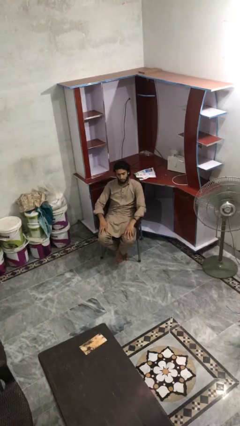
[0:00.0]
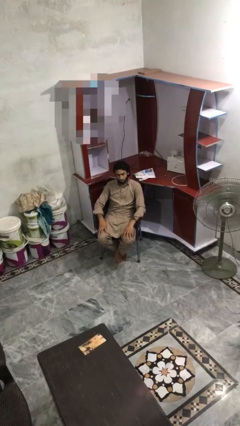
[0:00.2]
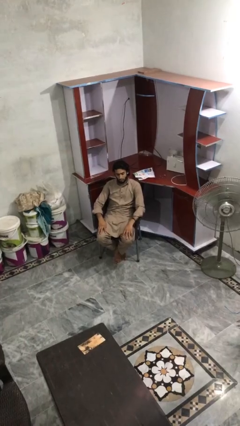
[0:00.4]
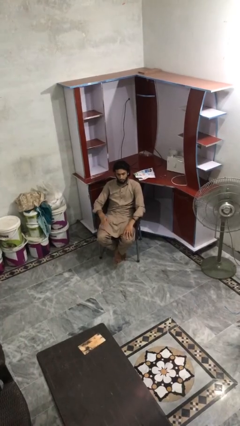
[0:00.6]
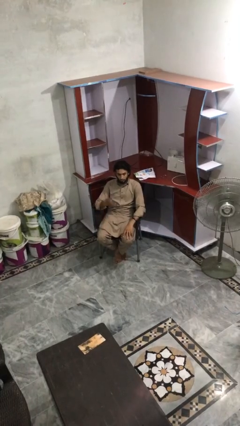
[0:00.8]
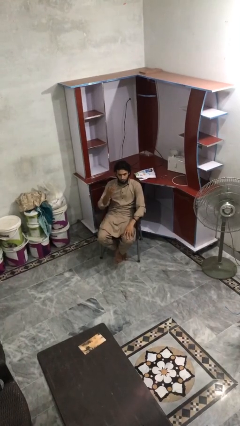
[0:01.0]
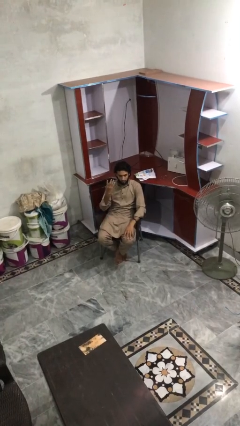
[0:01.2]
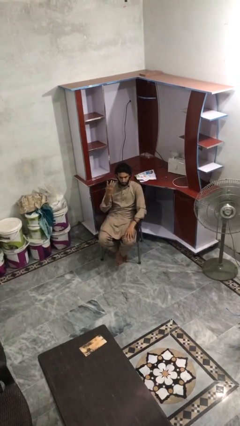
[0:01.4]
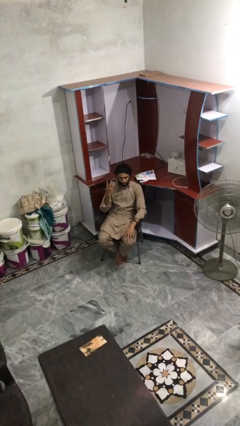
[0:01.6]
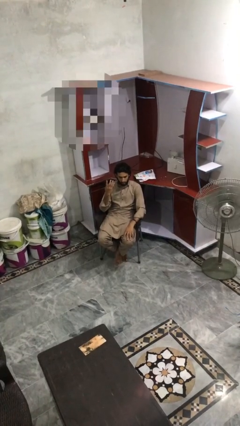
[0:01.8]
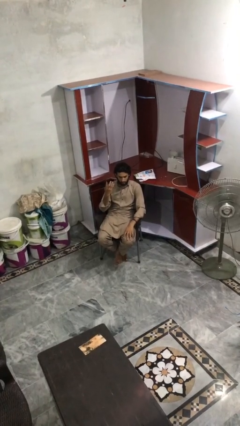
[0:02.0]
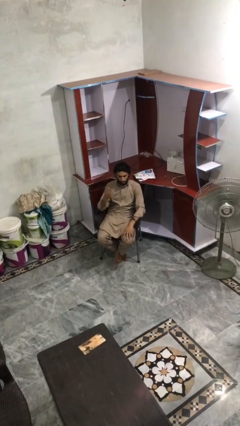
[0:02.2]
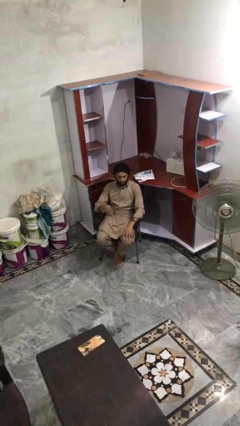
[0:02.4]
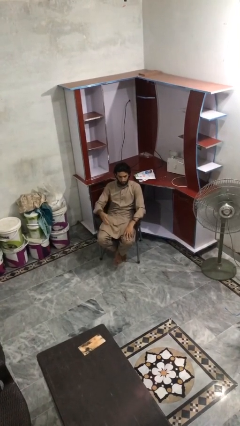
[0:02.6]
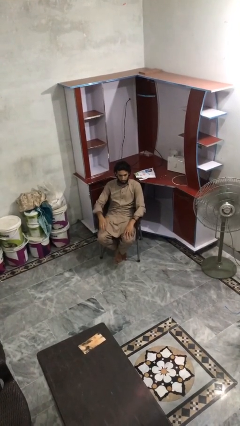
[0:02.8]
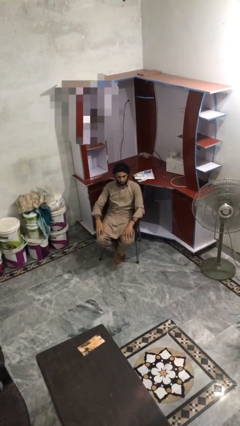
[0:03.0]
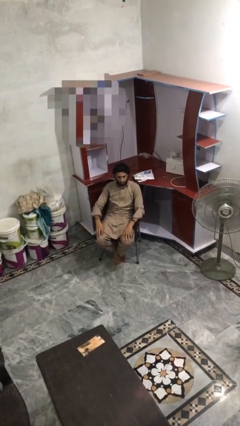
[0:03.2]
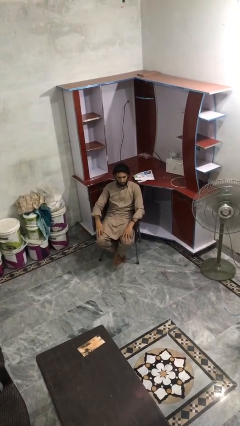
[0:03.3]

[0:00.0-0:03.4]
person gestures number four

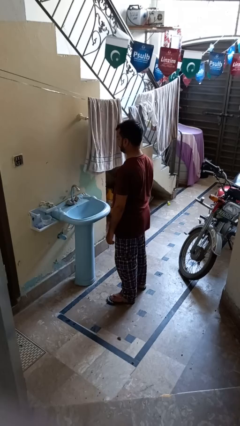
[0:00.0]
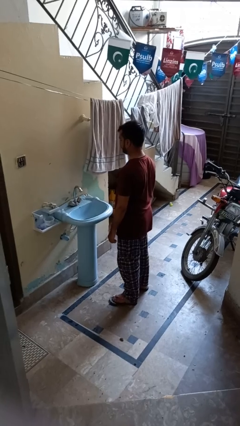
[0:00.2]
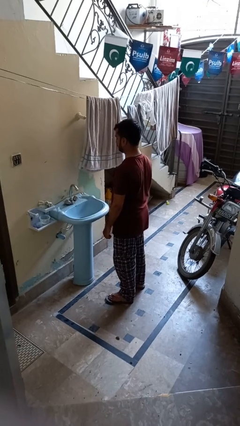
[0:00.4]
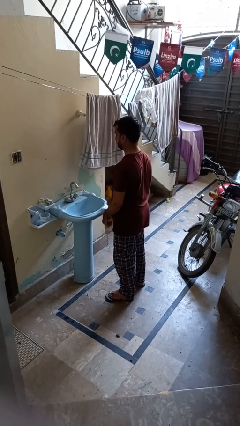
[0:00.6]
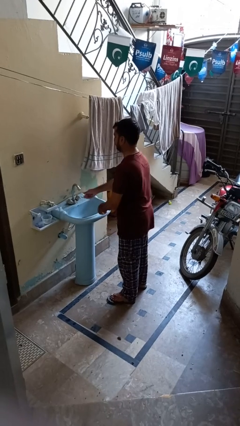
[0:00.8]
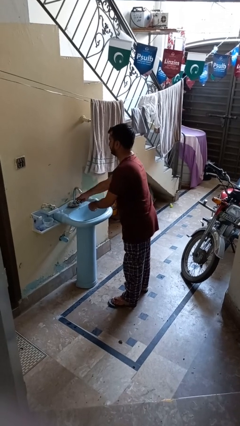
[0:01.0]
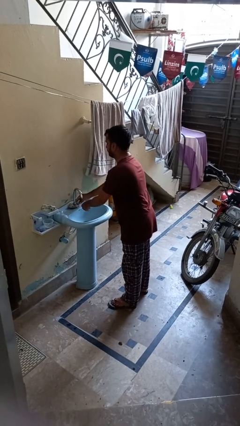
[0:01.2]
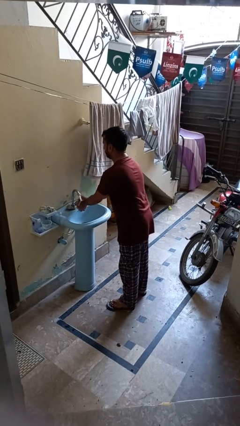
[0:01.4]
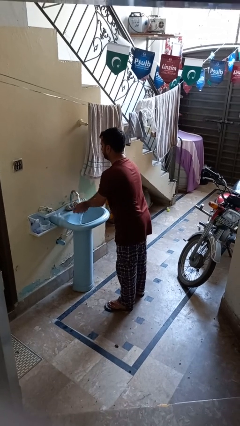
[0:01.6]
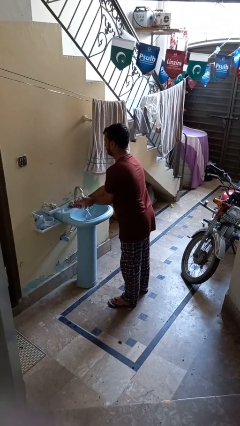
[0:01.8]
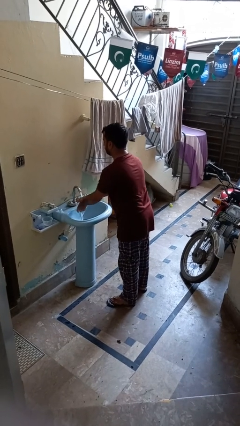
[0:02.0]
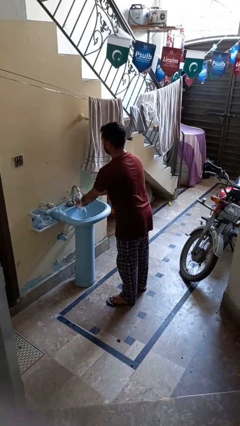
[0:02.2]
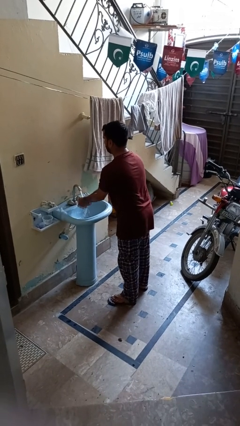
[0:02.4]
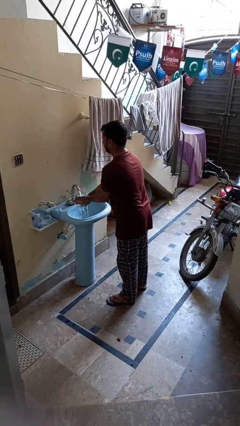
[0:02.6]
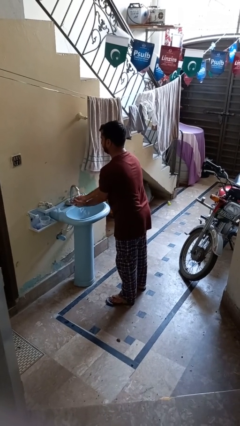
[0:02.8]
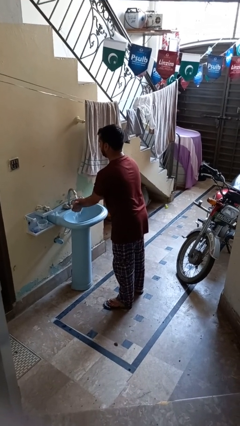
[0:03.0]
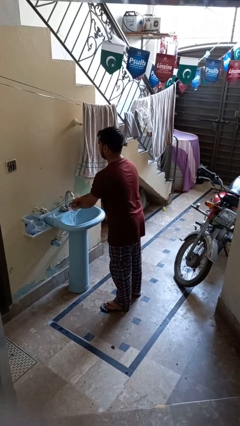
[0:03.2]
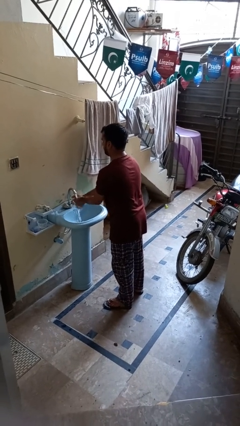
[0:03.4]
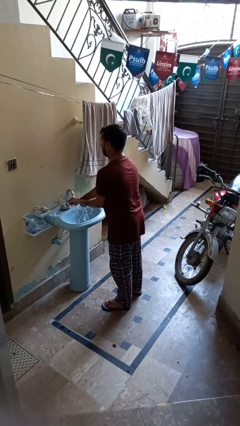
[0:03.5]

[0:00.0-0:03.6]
person washes hands

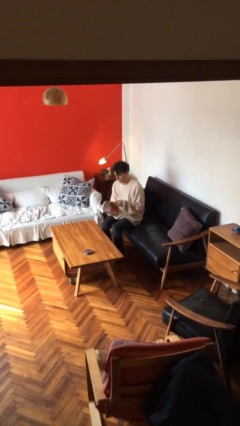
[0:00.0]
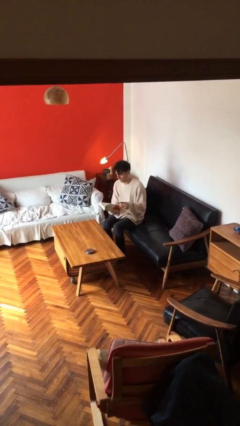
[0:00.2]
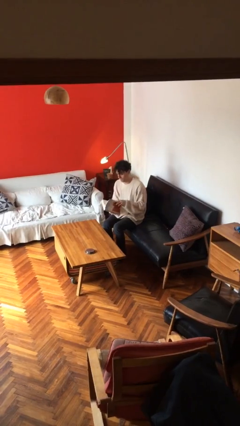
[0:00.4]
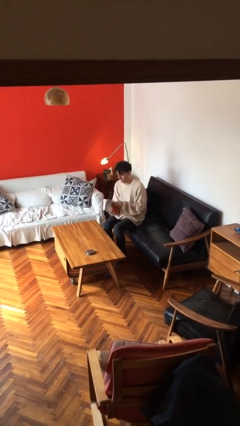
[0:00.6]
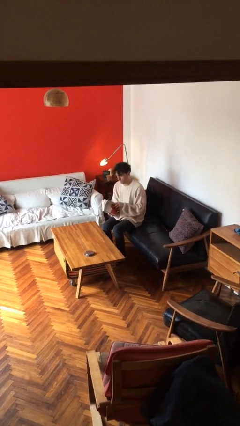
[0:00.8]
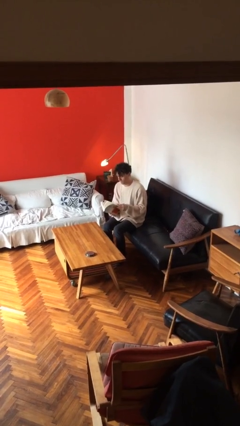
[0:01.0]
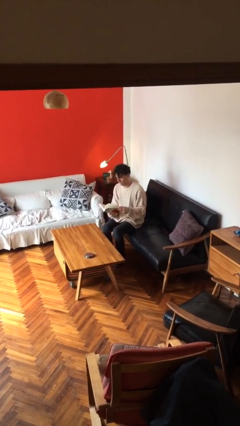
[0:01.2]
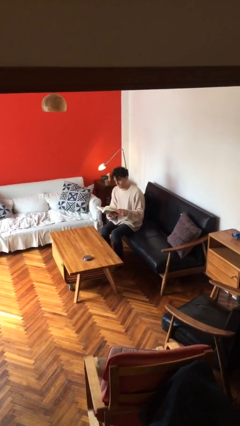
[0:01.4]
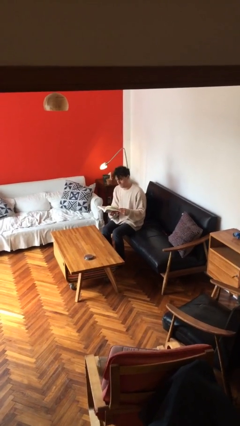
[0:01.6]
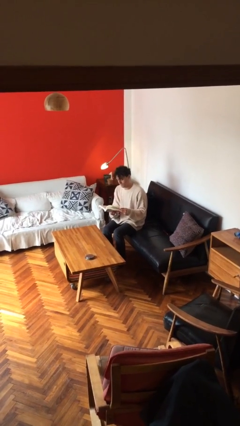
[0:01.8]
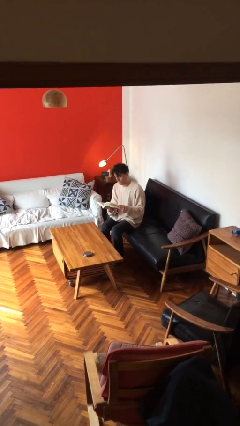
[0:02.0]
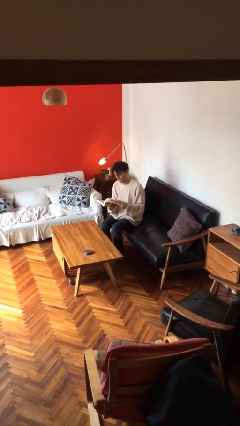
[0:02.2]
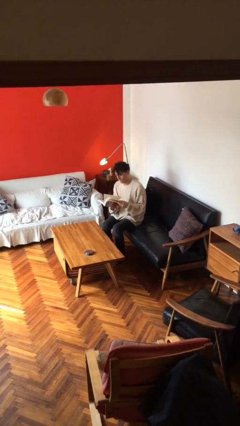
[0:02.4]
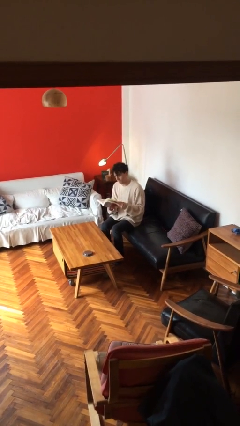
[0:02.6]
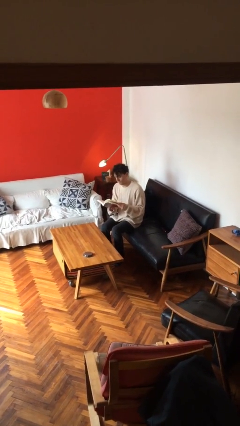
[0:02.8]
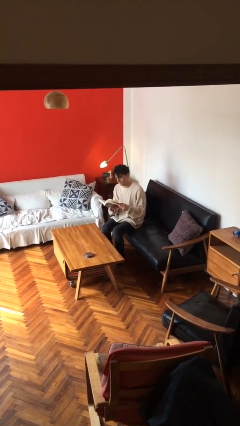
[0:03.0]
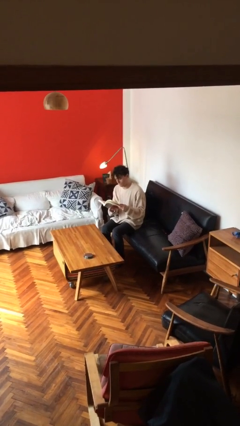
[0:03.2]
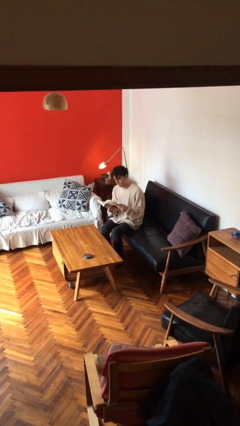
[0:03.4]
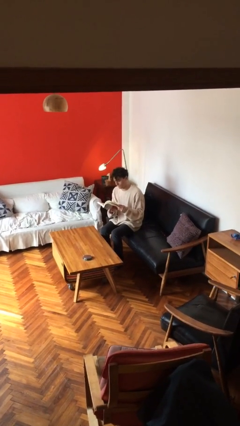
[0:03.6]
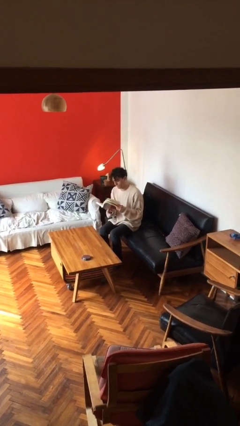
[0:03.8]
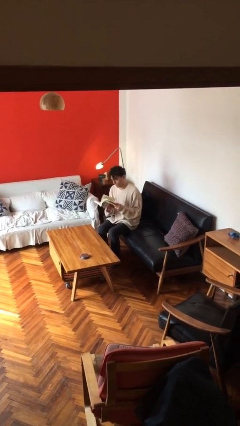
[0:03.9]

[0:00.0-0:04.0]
person reads document

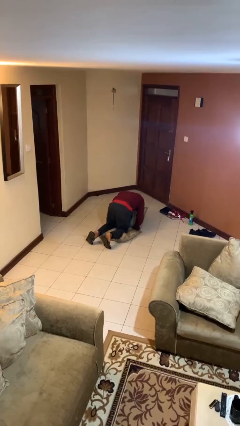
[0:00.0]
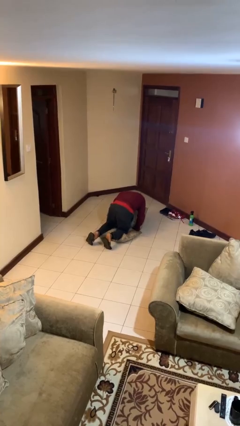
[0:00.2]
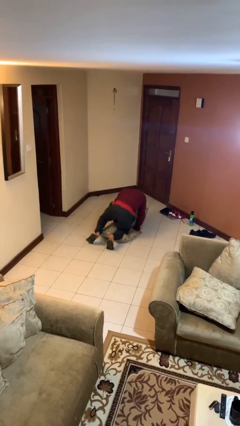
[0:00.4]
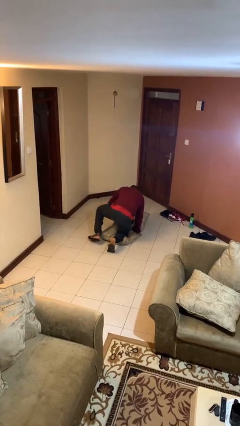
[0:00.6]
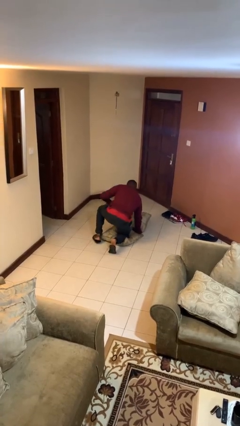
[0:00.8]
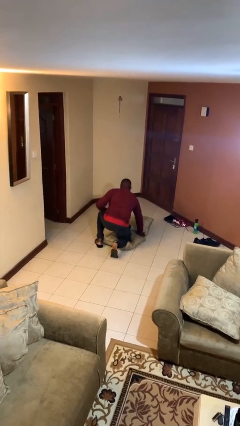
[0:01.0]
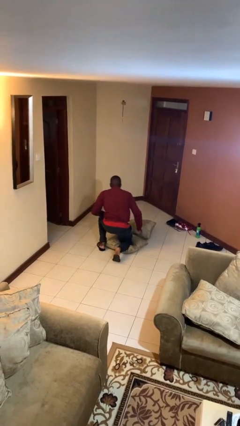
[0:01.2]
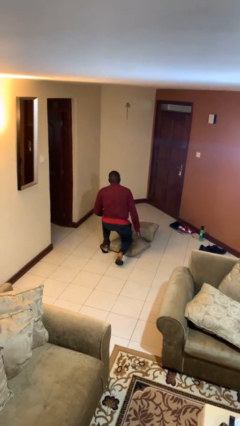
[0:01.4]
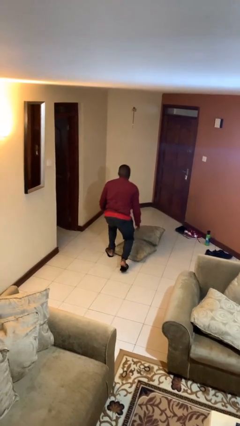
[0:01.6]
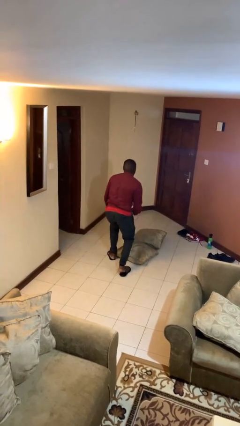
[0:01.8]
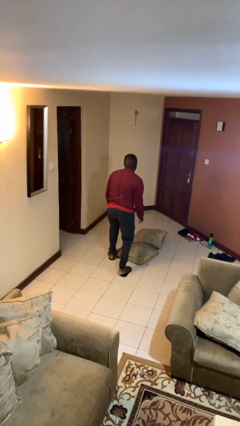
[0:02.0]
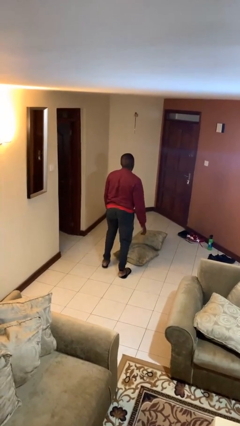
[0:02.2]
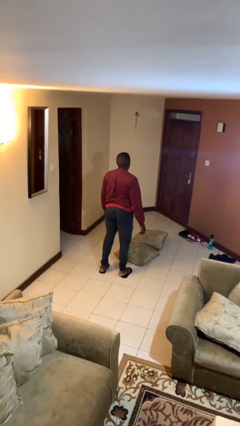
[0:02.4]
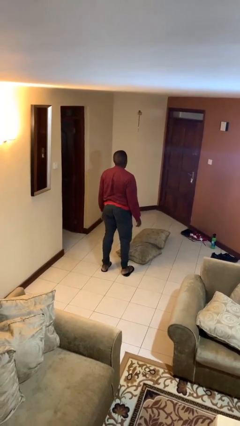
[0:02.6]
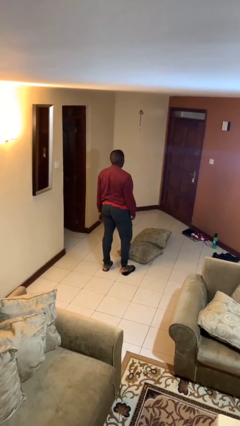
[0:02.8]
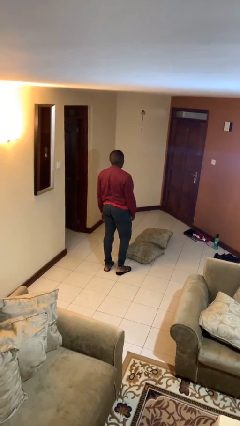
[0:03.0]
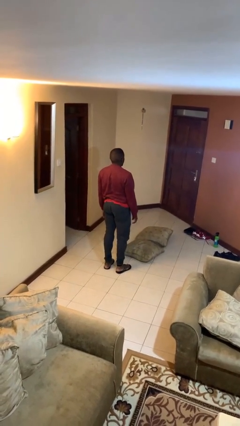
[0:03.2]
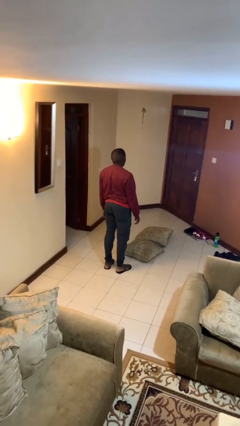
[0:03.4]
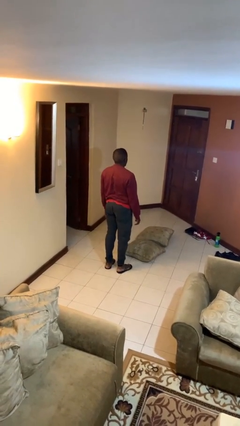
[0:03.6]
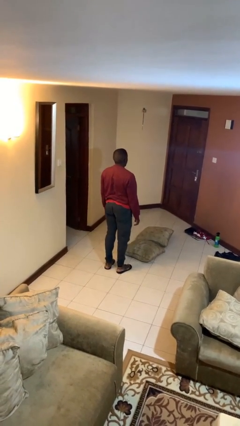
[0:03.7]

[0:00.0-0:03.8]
person stands up from floor

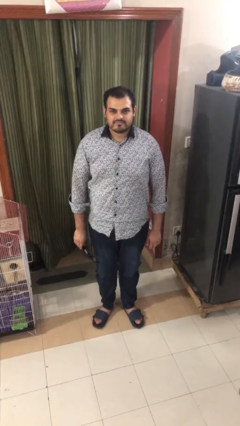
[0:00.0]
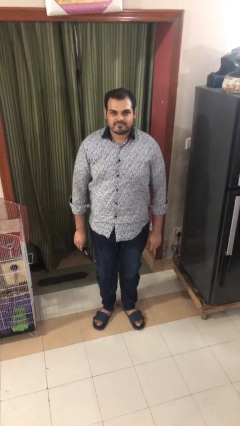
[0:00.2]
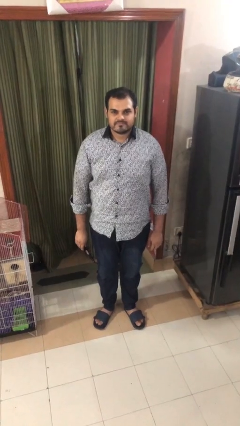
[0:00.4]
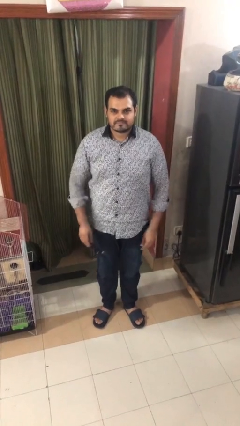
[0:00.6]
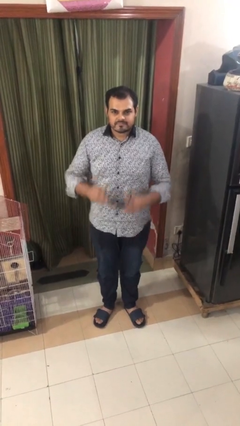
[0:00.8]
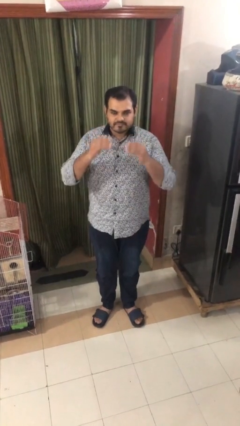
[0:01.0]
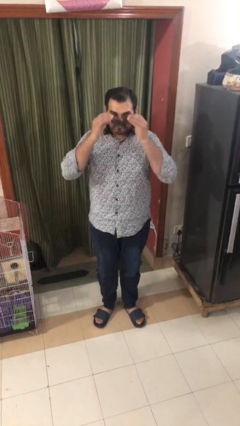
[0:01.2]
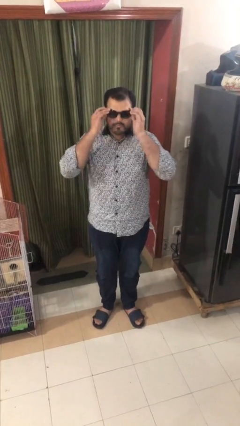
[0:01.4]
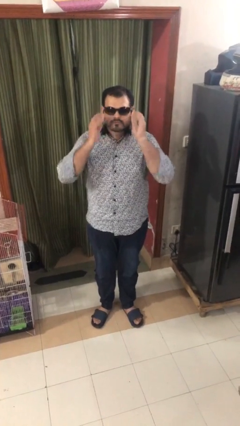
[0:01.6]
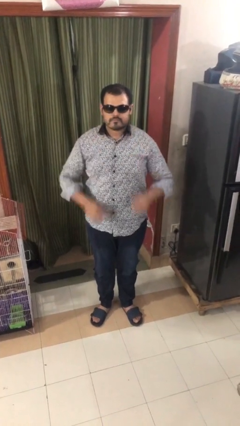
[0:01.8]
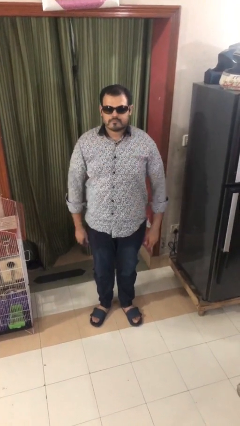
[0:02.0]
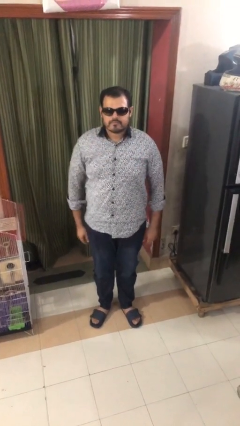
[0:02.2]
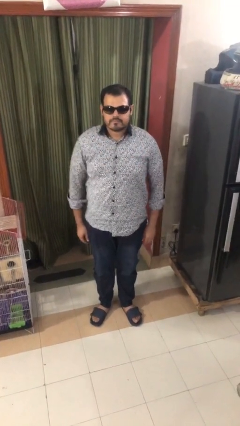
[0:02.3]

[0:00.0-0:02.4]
person puts on sunglasses

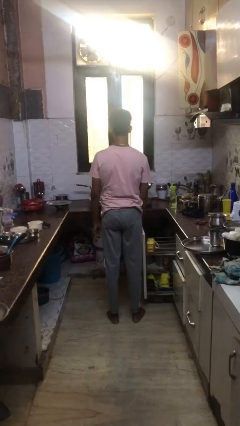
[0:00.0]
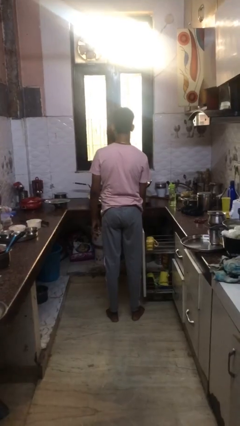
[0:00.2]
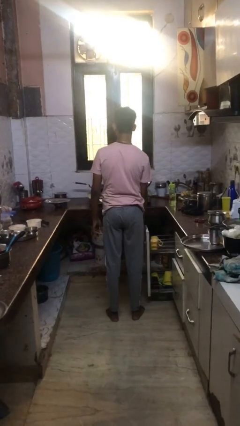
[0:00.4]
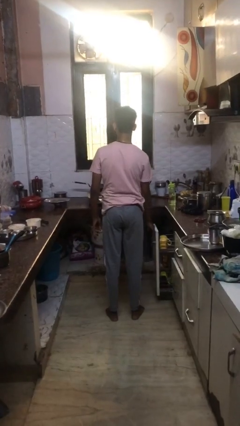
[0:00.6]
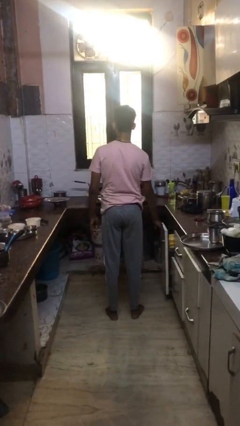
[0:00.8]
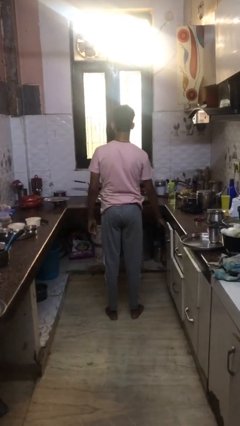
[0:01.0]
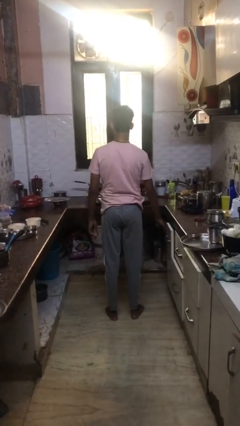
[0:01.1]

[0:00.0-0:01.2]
person closes dishwasher
